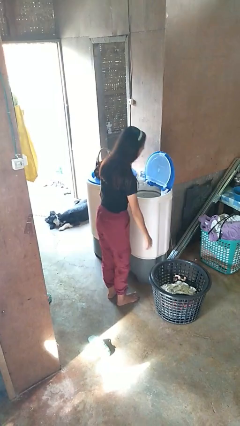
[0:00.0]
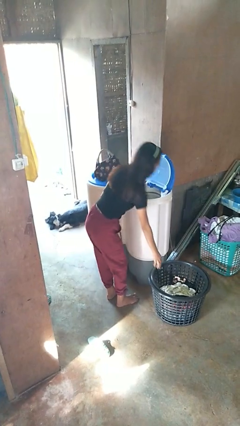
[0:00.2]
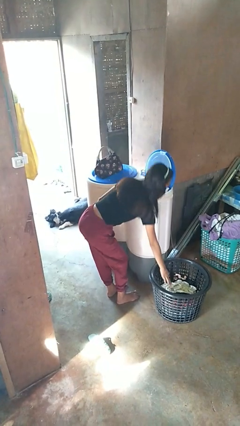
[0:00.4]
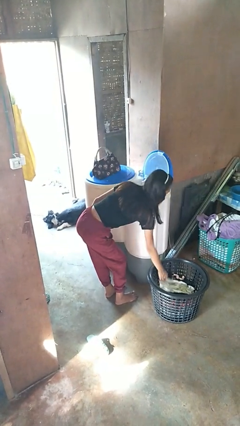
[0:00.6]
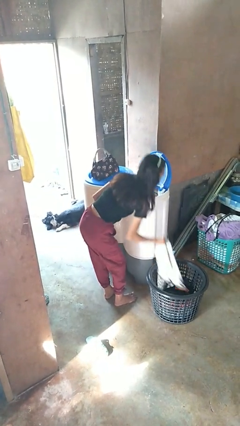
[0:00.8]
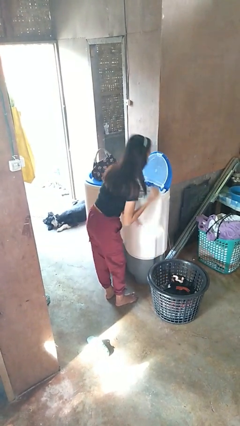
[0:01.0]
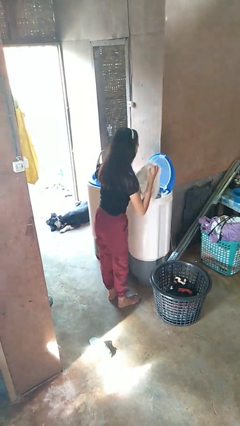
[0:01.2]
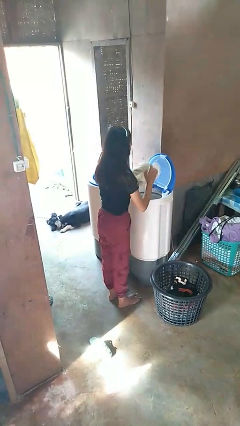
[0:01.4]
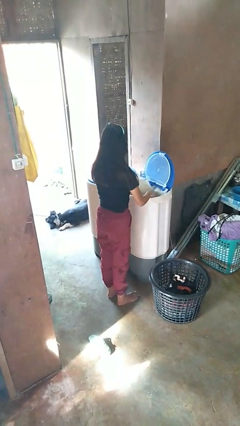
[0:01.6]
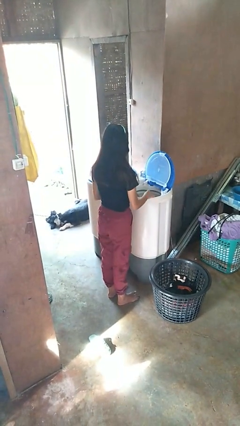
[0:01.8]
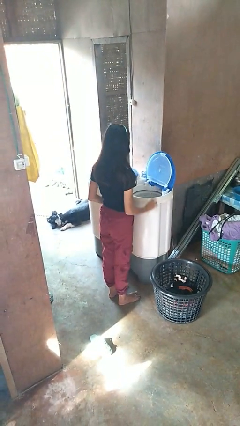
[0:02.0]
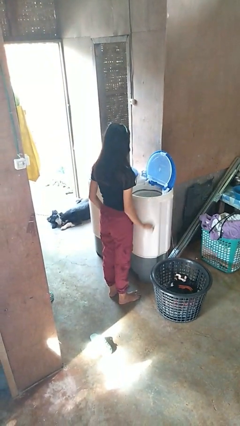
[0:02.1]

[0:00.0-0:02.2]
person loads clotheswasher

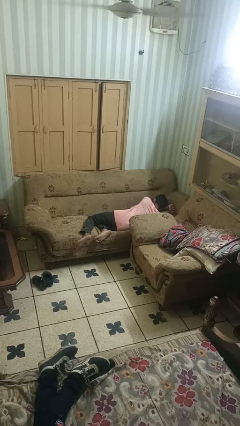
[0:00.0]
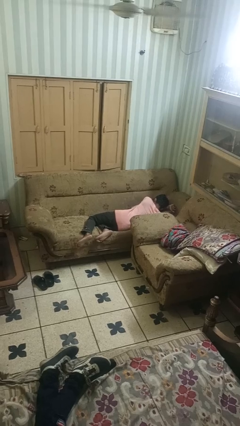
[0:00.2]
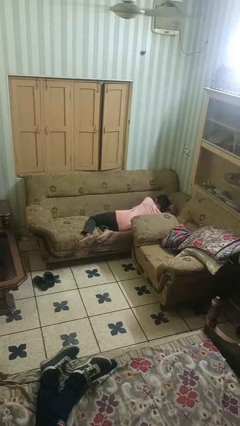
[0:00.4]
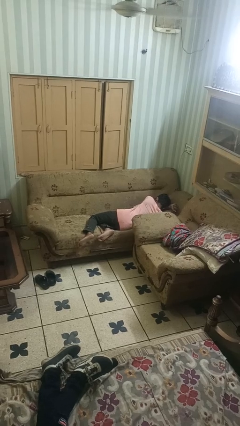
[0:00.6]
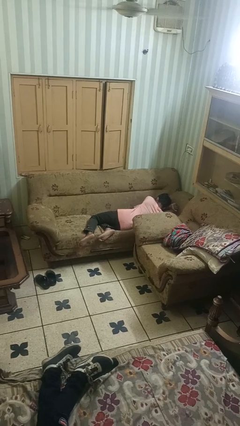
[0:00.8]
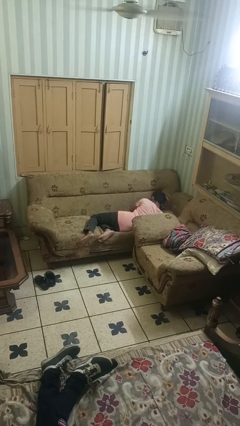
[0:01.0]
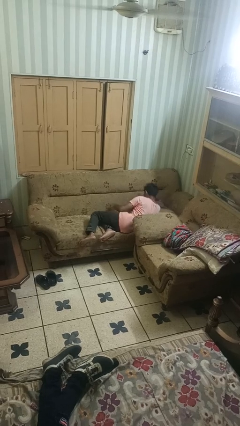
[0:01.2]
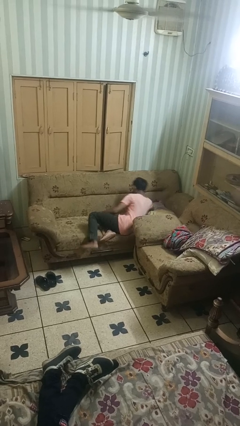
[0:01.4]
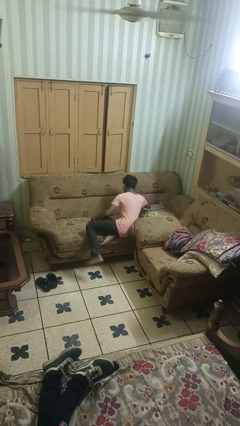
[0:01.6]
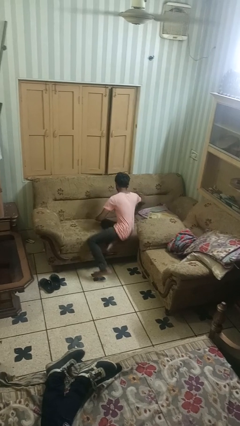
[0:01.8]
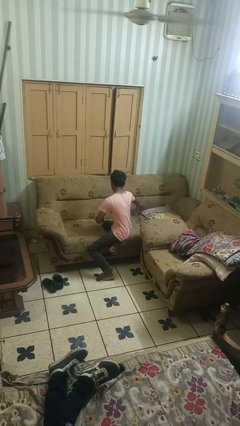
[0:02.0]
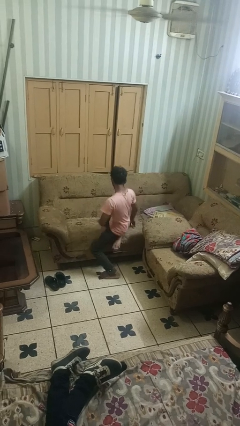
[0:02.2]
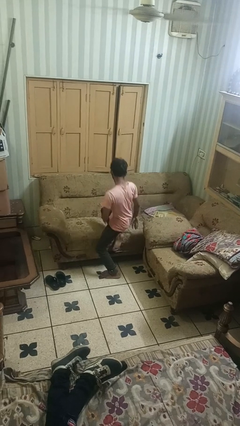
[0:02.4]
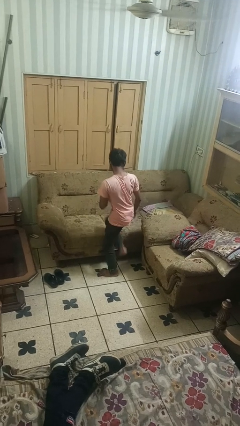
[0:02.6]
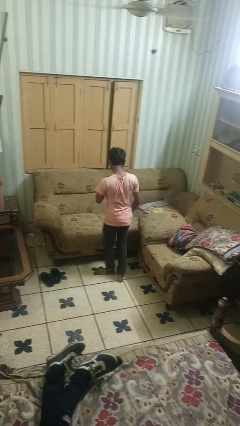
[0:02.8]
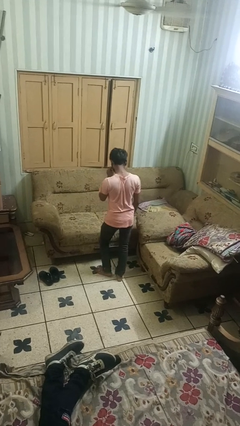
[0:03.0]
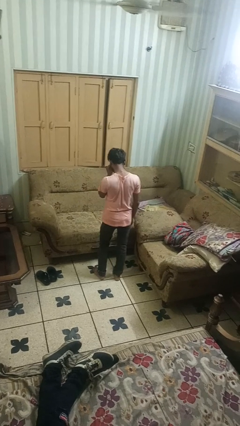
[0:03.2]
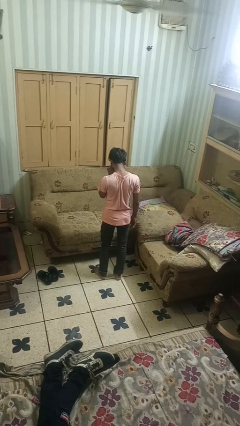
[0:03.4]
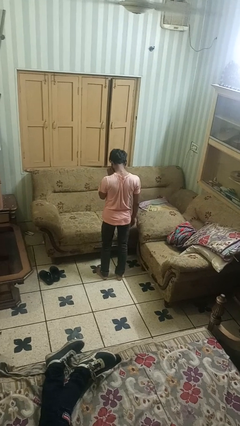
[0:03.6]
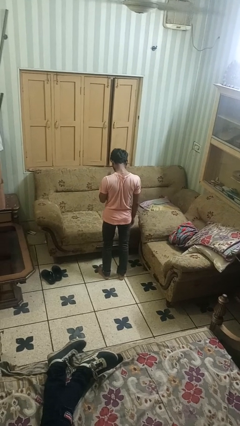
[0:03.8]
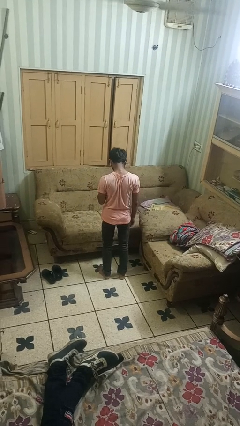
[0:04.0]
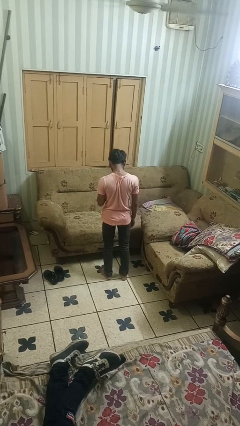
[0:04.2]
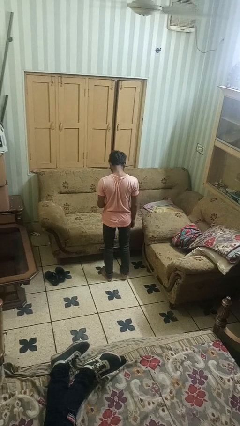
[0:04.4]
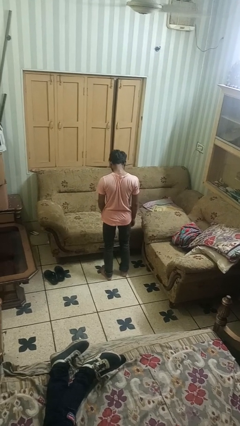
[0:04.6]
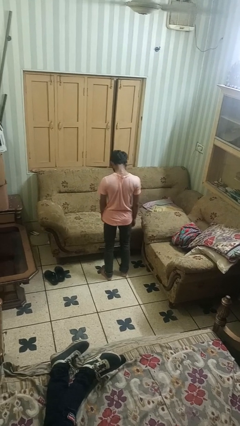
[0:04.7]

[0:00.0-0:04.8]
person stands up

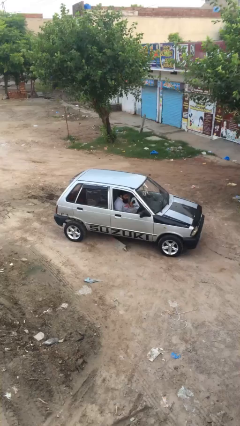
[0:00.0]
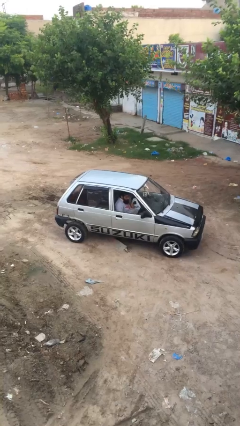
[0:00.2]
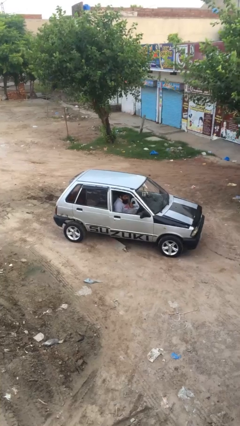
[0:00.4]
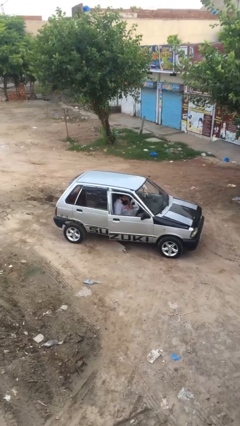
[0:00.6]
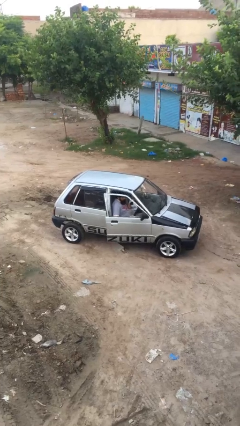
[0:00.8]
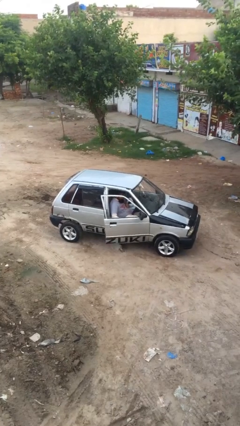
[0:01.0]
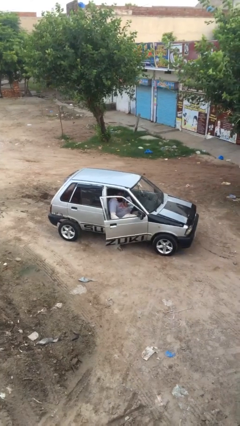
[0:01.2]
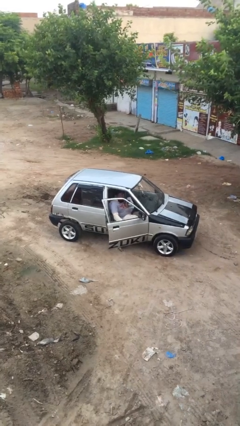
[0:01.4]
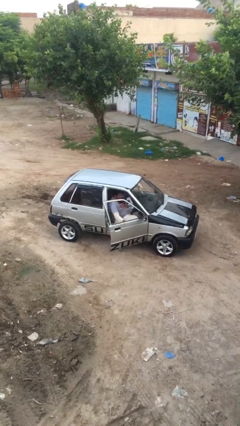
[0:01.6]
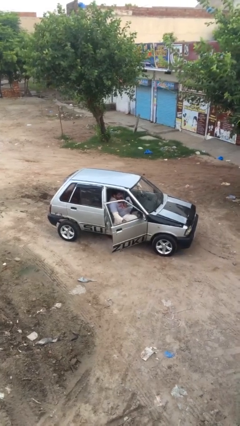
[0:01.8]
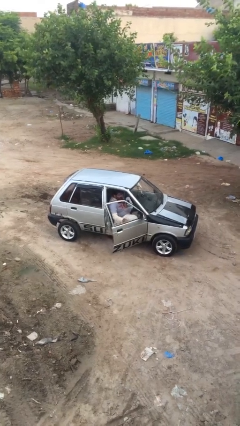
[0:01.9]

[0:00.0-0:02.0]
person opens car door

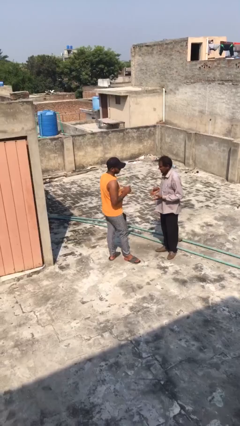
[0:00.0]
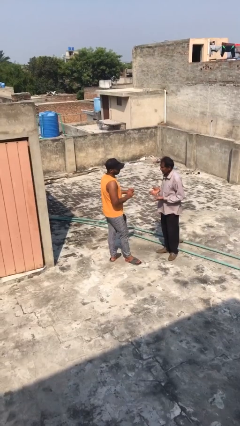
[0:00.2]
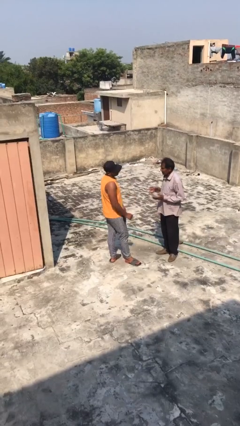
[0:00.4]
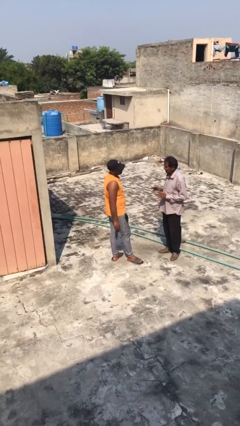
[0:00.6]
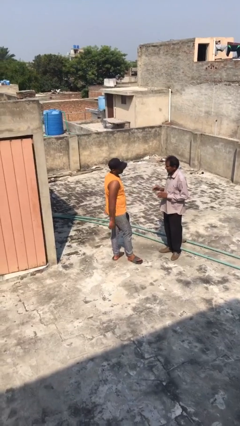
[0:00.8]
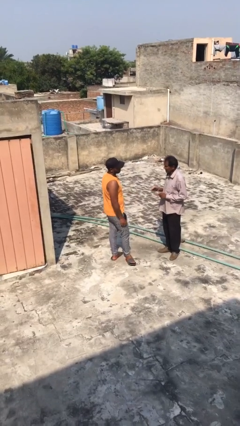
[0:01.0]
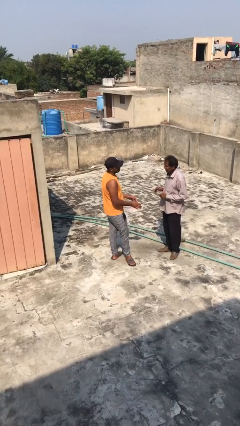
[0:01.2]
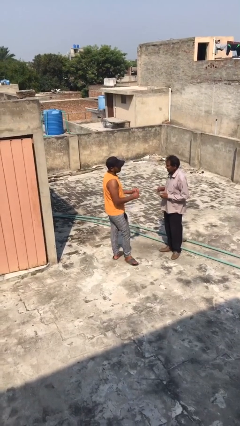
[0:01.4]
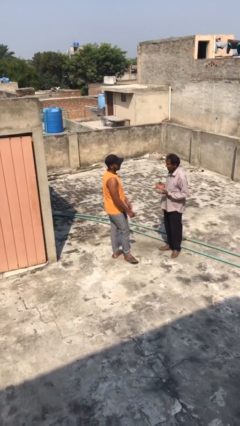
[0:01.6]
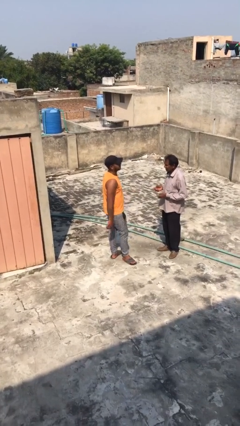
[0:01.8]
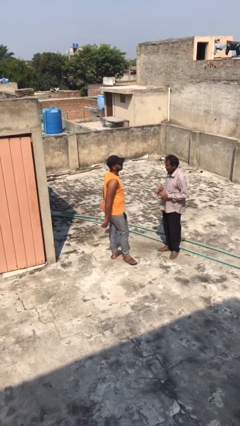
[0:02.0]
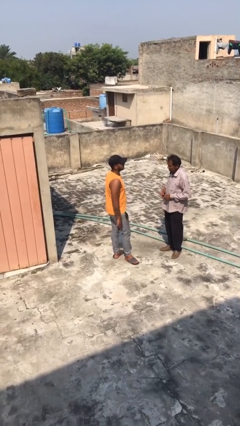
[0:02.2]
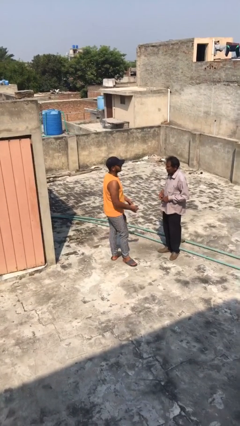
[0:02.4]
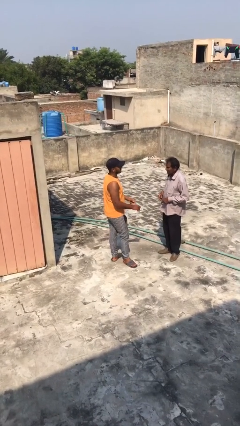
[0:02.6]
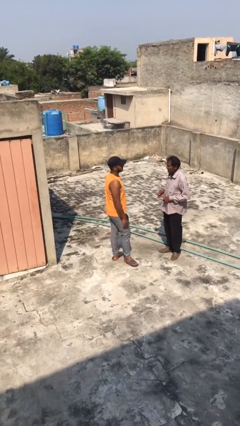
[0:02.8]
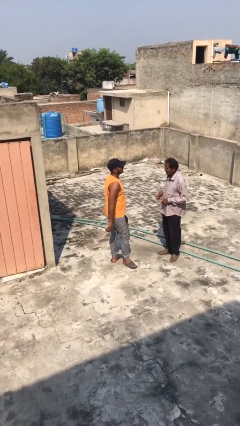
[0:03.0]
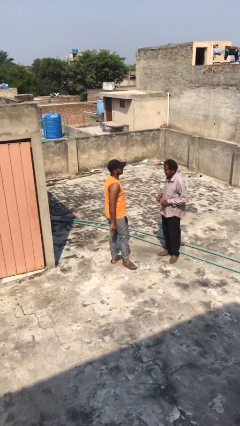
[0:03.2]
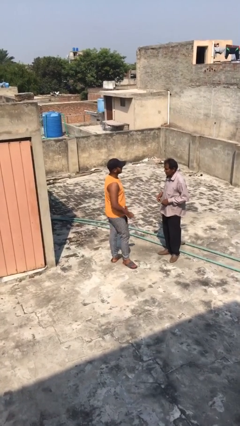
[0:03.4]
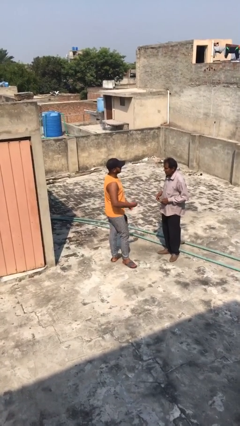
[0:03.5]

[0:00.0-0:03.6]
person talks to person

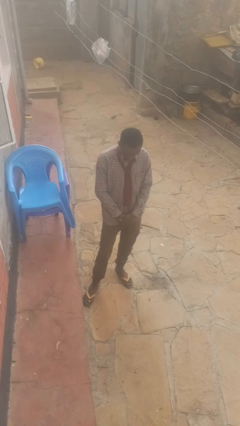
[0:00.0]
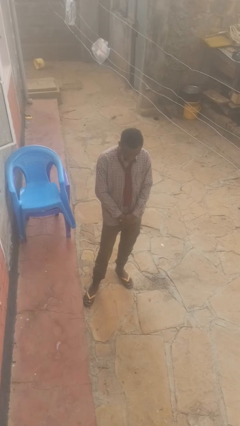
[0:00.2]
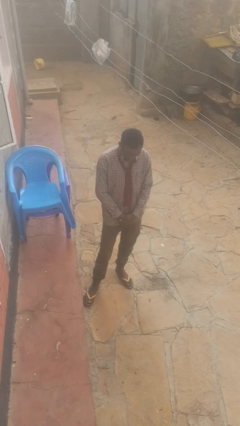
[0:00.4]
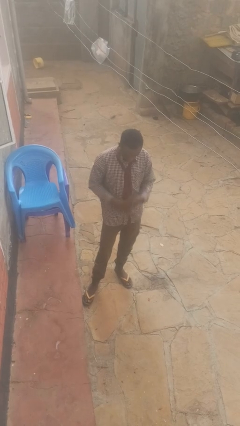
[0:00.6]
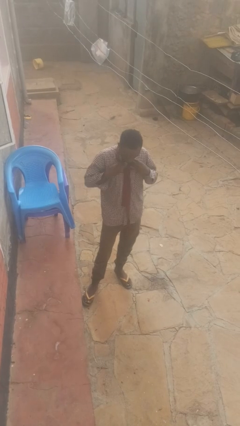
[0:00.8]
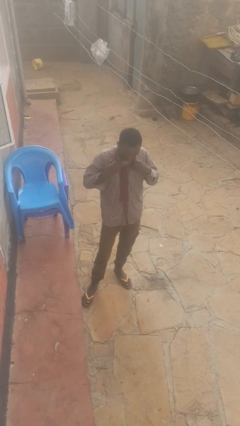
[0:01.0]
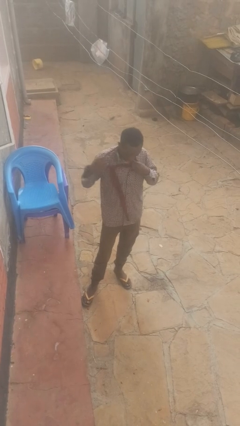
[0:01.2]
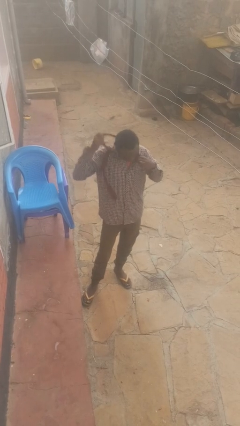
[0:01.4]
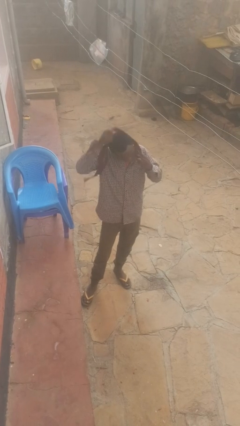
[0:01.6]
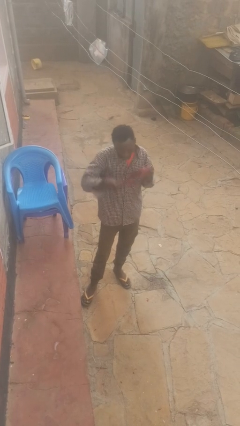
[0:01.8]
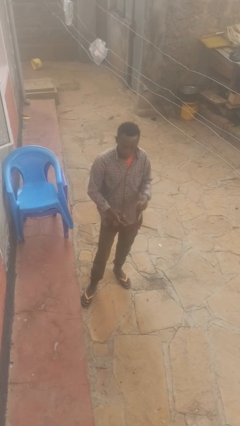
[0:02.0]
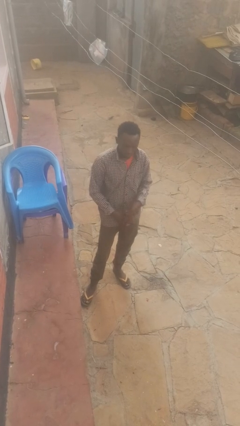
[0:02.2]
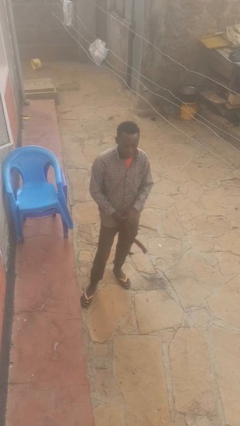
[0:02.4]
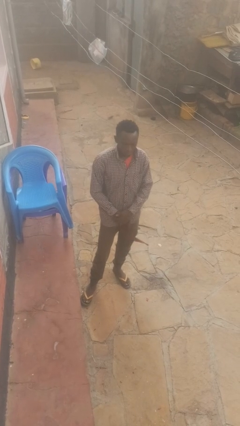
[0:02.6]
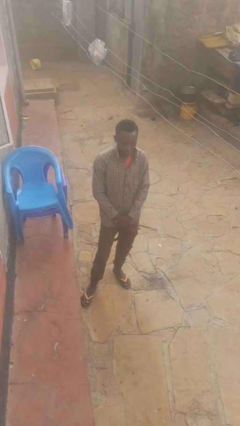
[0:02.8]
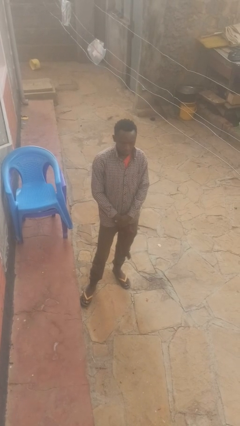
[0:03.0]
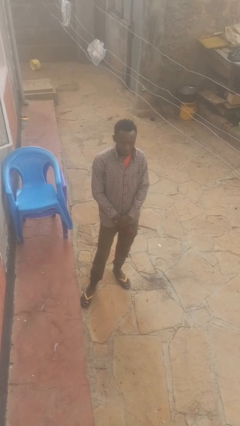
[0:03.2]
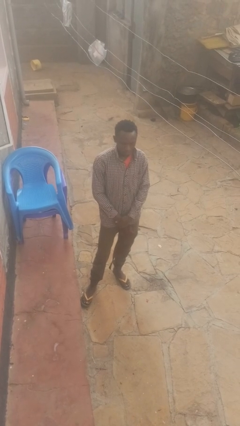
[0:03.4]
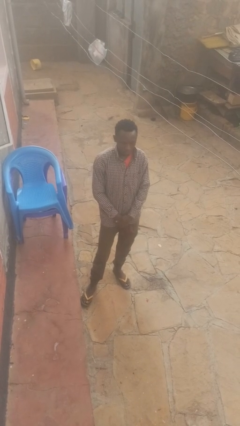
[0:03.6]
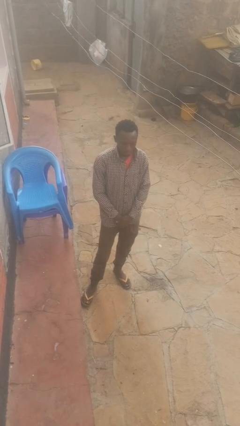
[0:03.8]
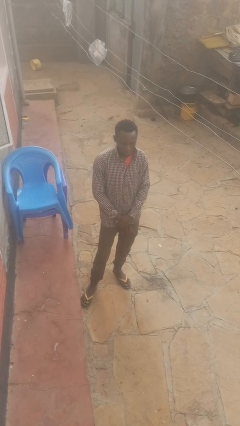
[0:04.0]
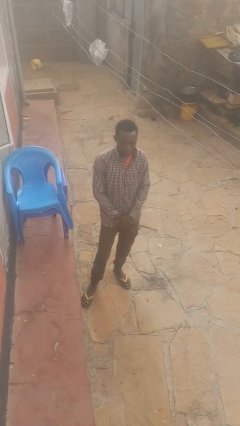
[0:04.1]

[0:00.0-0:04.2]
person takes off necktie

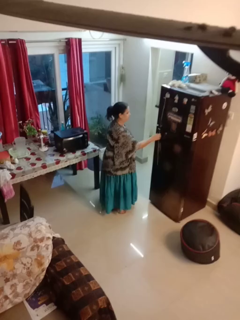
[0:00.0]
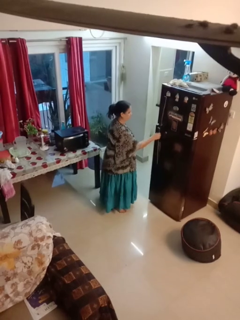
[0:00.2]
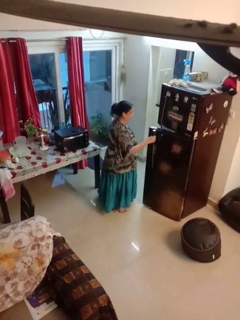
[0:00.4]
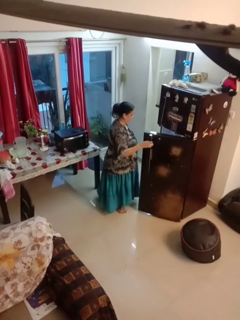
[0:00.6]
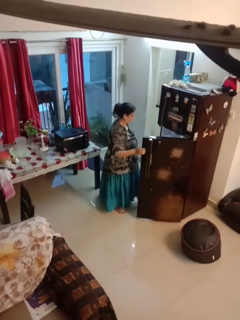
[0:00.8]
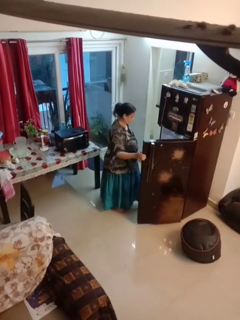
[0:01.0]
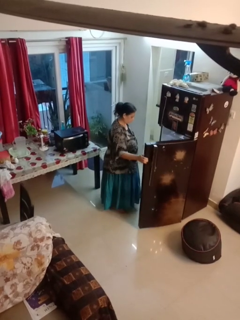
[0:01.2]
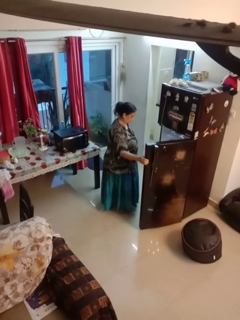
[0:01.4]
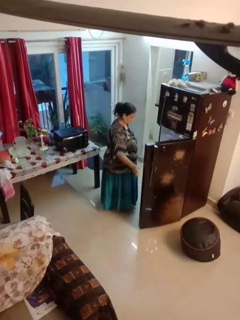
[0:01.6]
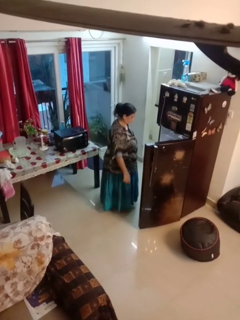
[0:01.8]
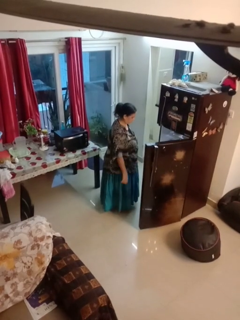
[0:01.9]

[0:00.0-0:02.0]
person opens refrigerator
